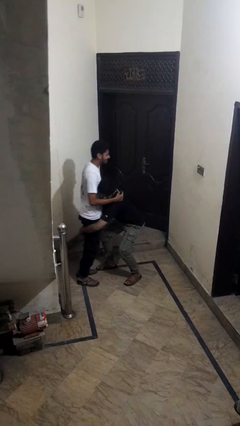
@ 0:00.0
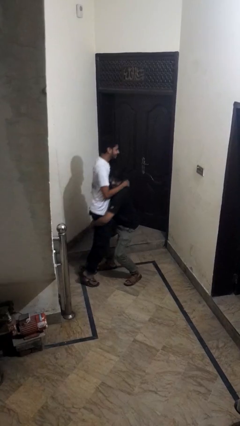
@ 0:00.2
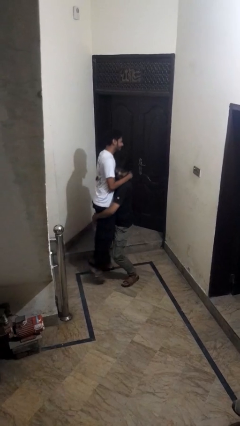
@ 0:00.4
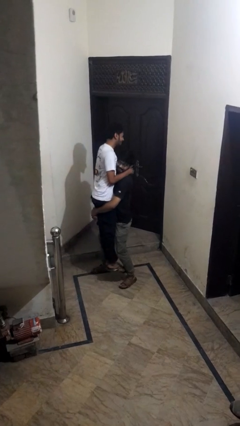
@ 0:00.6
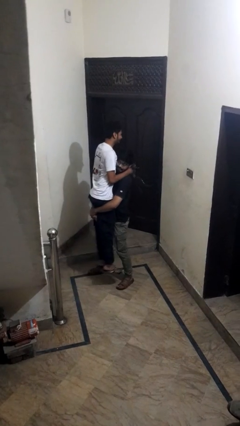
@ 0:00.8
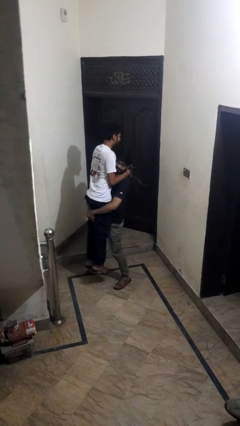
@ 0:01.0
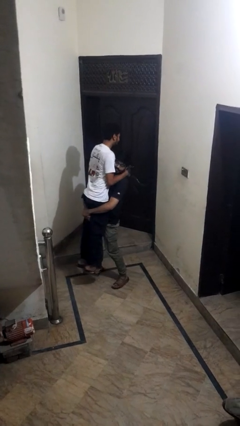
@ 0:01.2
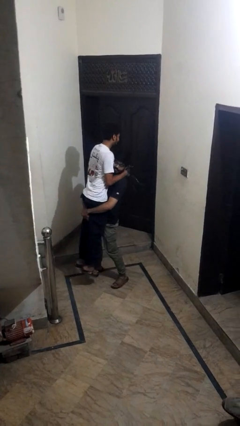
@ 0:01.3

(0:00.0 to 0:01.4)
person takes off hat

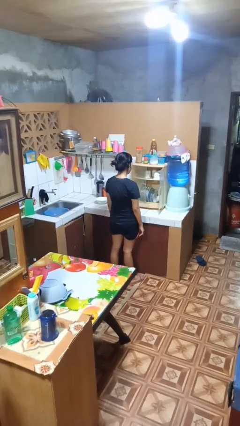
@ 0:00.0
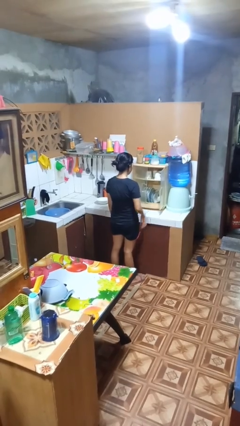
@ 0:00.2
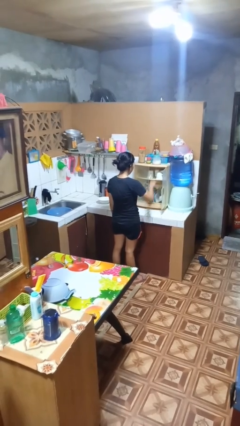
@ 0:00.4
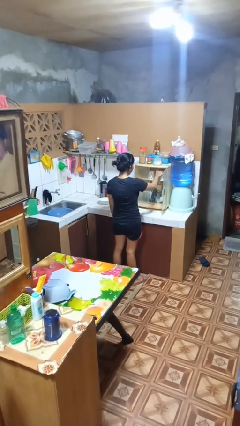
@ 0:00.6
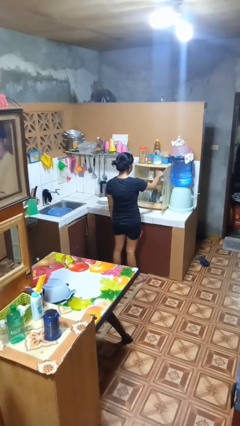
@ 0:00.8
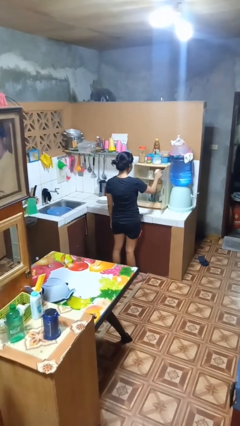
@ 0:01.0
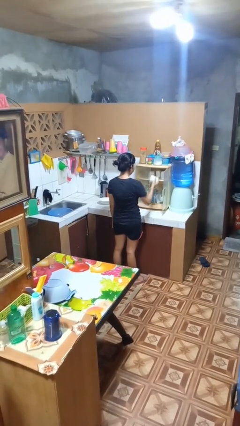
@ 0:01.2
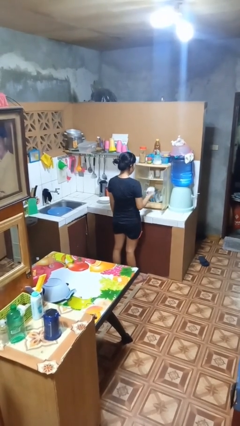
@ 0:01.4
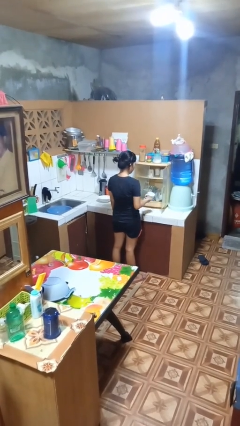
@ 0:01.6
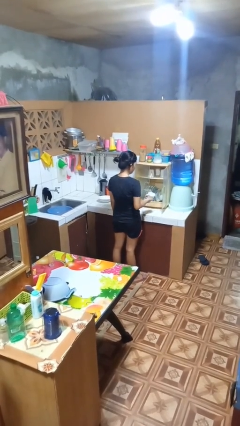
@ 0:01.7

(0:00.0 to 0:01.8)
person takes object from kitchen drawer

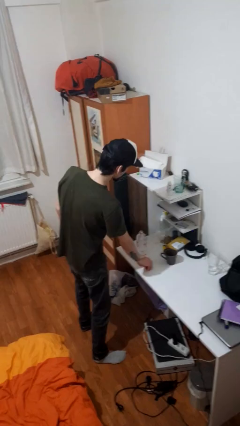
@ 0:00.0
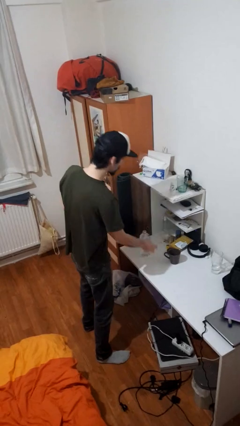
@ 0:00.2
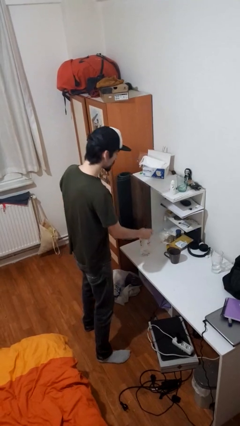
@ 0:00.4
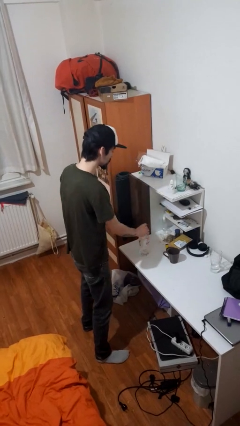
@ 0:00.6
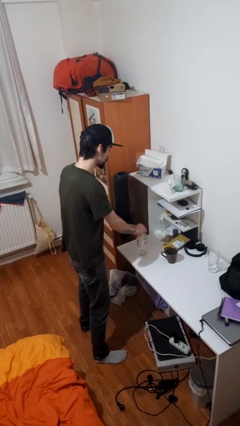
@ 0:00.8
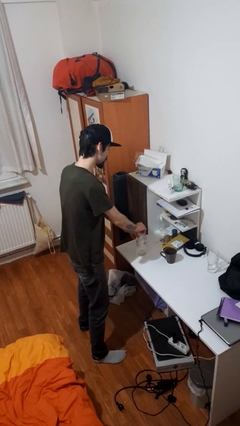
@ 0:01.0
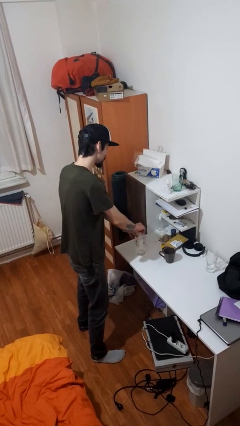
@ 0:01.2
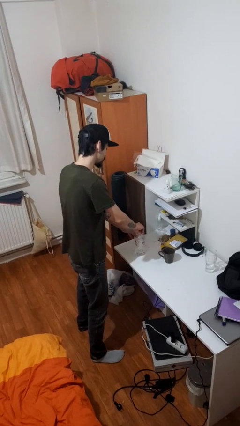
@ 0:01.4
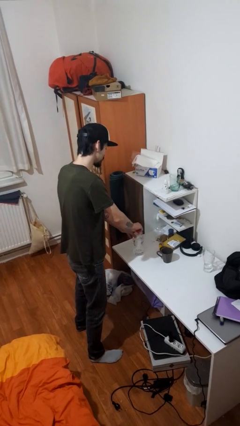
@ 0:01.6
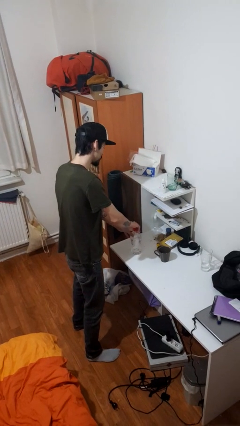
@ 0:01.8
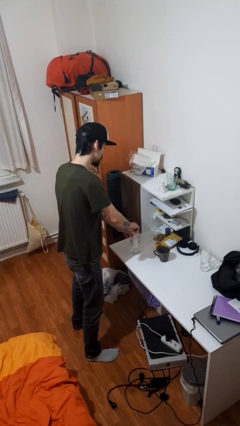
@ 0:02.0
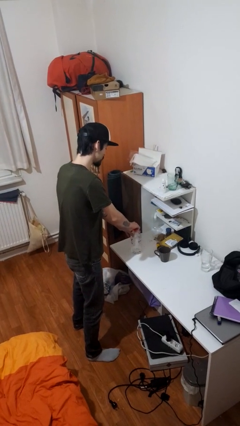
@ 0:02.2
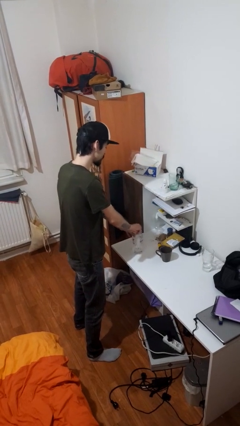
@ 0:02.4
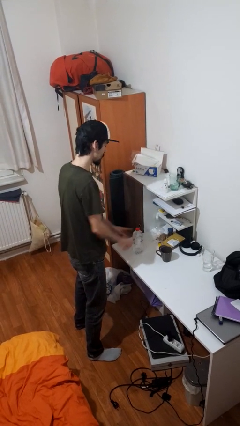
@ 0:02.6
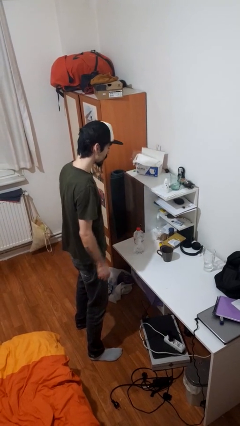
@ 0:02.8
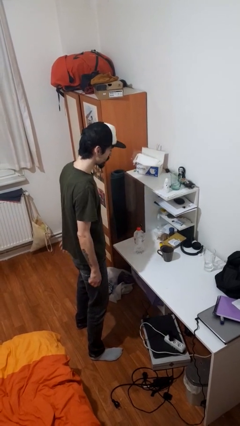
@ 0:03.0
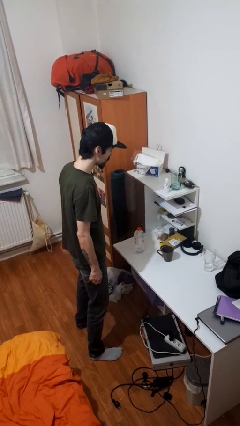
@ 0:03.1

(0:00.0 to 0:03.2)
person screws lid to bottle

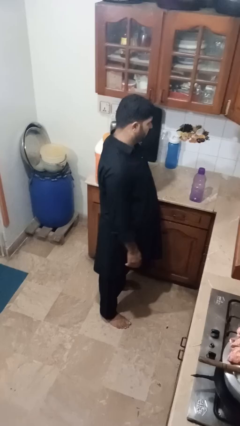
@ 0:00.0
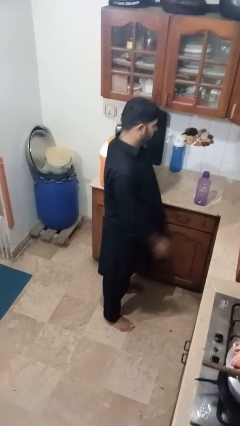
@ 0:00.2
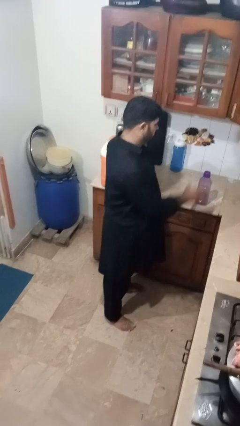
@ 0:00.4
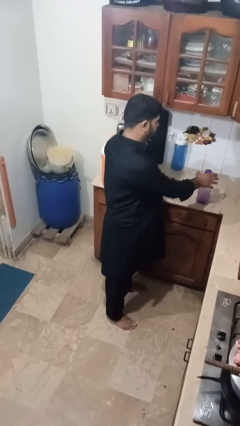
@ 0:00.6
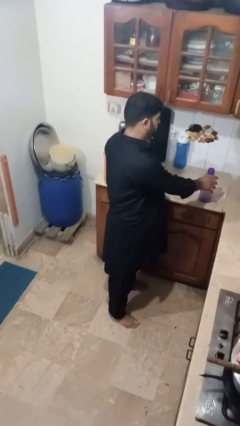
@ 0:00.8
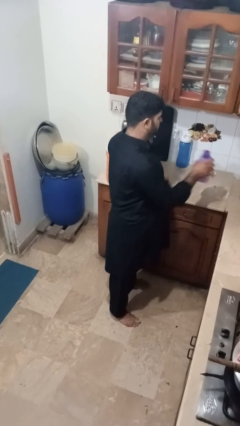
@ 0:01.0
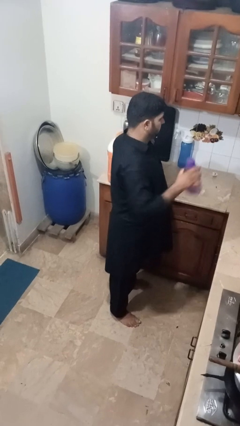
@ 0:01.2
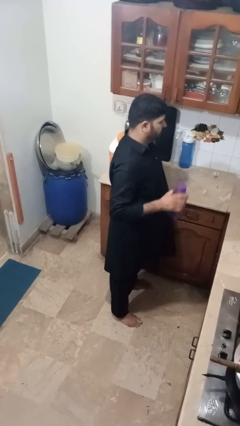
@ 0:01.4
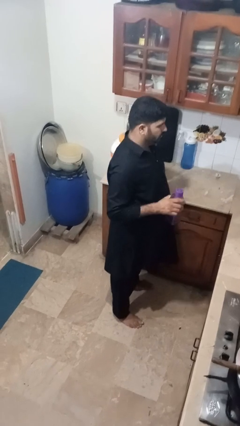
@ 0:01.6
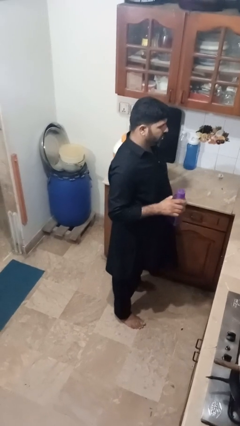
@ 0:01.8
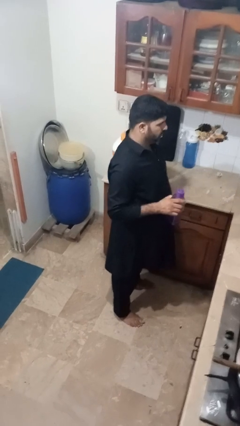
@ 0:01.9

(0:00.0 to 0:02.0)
person picks up object from countertop

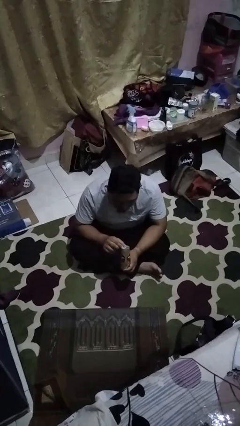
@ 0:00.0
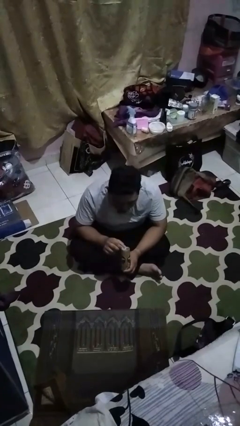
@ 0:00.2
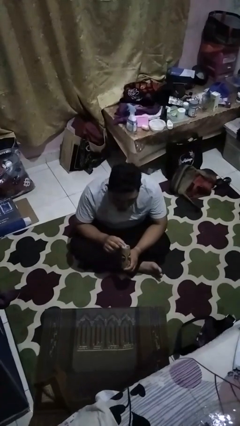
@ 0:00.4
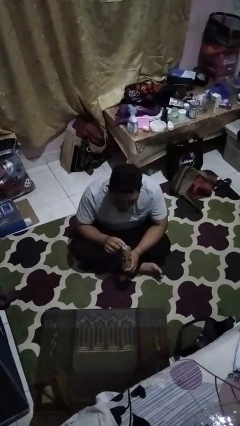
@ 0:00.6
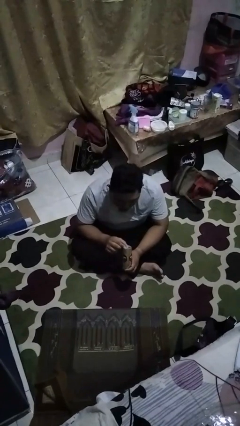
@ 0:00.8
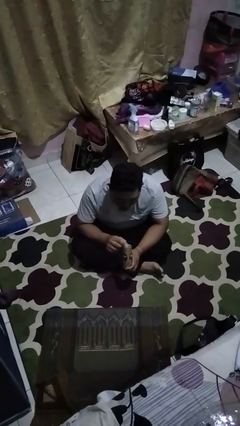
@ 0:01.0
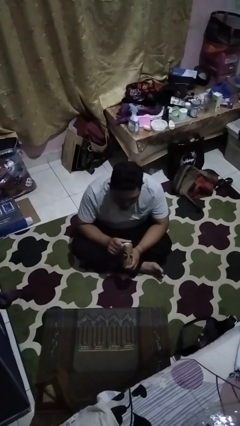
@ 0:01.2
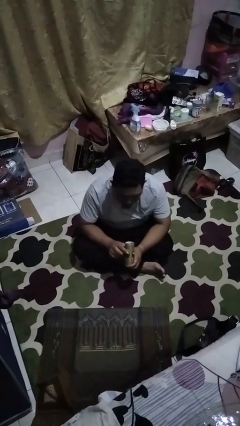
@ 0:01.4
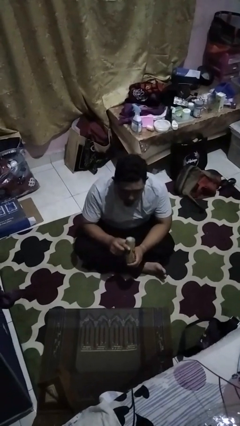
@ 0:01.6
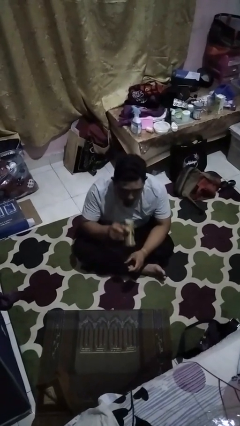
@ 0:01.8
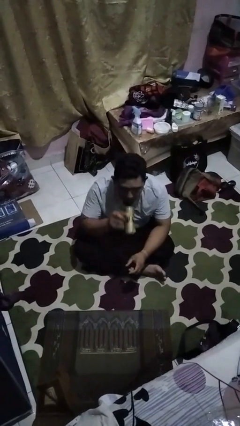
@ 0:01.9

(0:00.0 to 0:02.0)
person opens beverage can

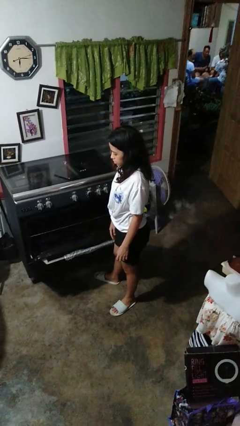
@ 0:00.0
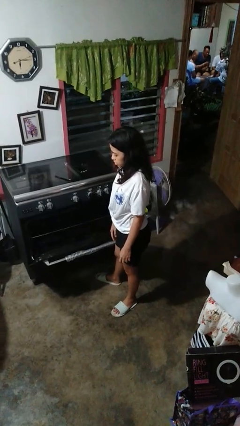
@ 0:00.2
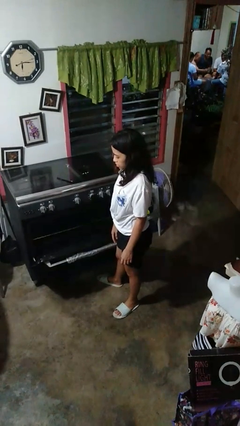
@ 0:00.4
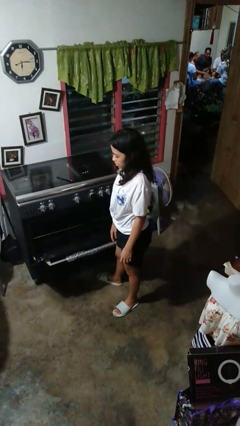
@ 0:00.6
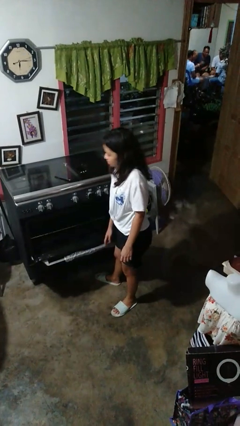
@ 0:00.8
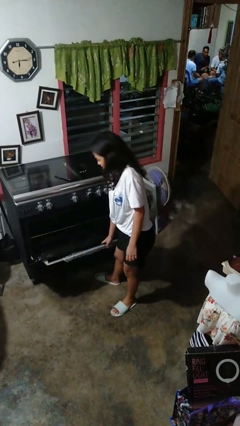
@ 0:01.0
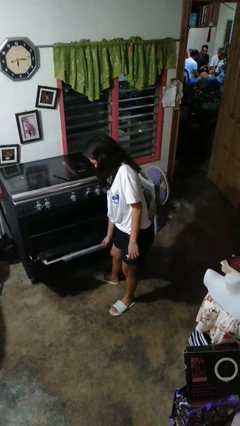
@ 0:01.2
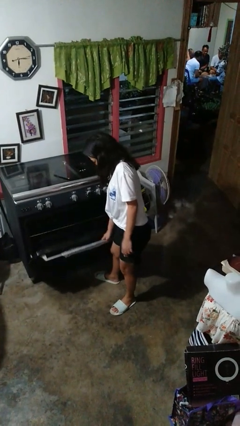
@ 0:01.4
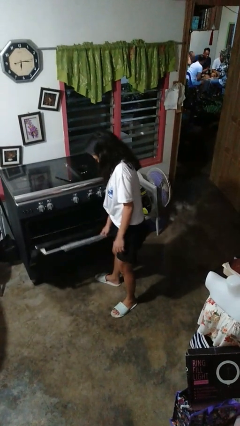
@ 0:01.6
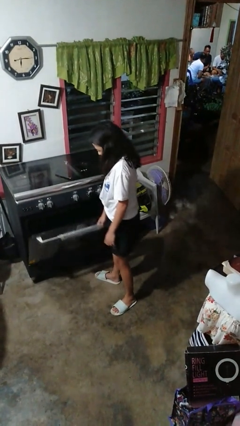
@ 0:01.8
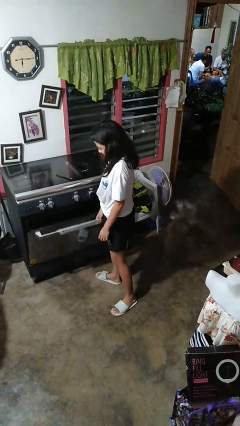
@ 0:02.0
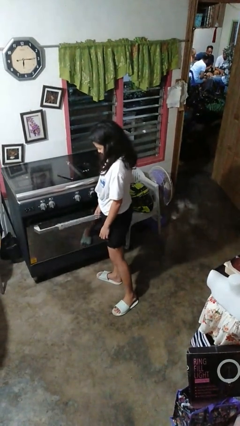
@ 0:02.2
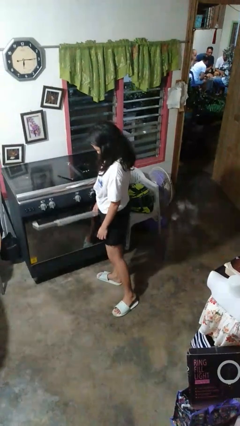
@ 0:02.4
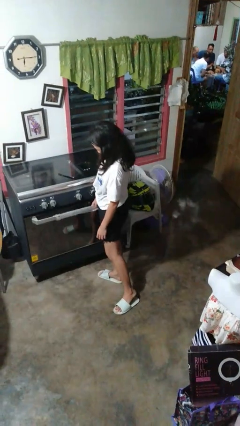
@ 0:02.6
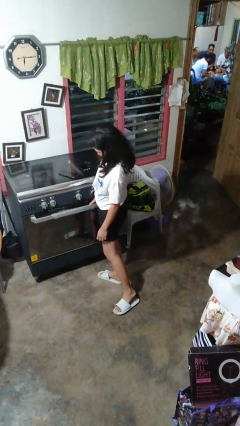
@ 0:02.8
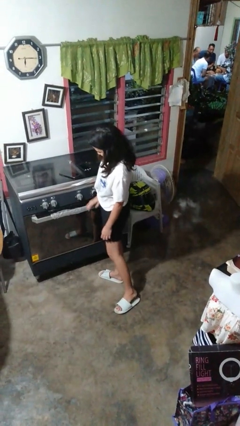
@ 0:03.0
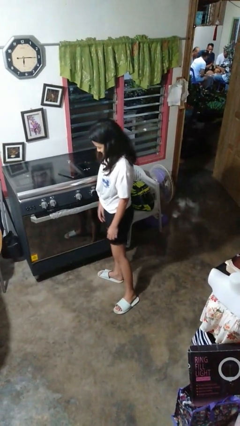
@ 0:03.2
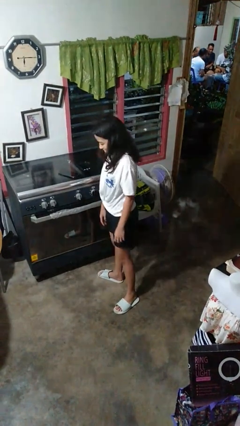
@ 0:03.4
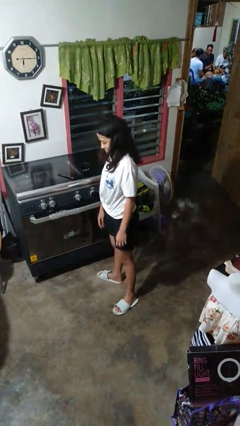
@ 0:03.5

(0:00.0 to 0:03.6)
person closes oven door

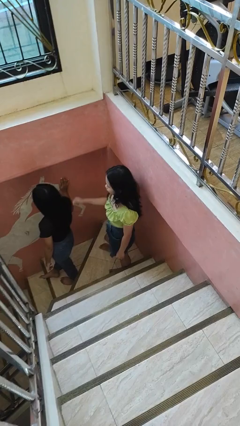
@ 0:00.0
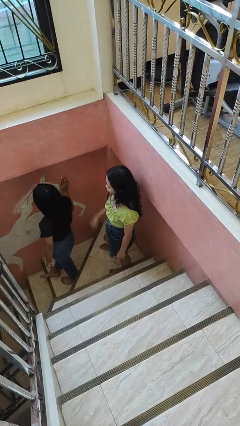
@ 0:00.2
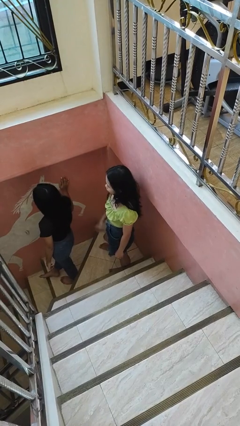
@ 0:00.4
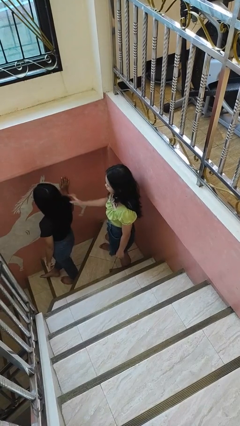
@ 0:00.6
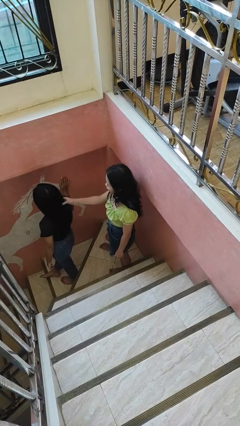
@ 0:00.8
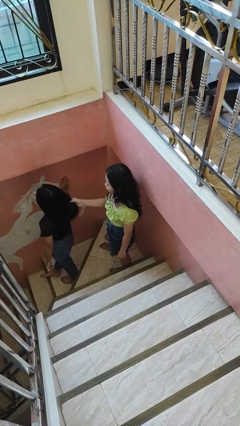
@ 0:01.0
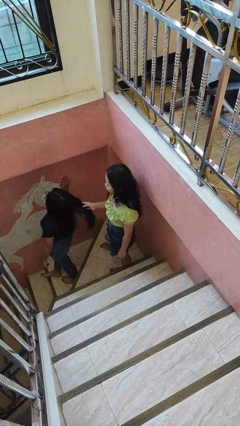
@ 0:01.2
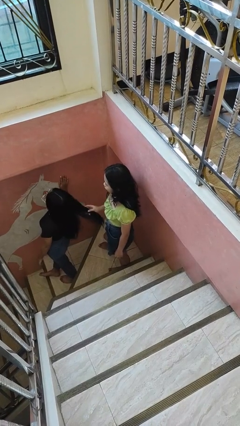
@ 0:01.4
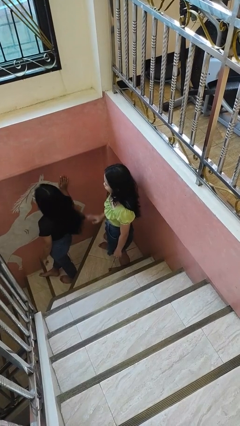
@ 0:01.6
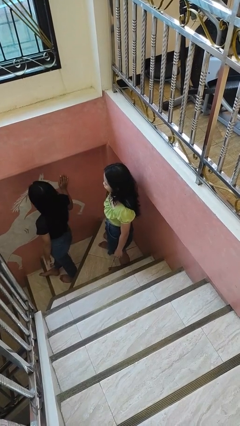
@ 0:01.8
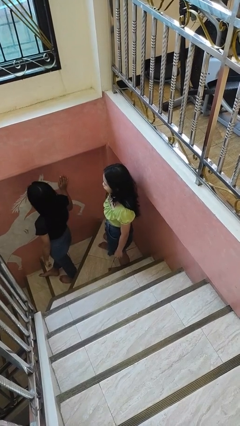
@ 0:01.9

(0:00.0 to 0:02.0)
person grabs person by hair

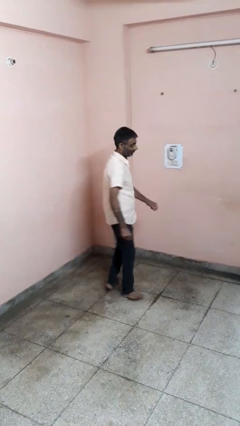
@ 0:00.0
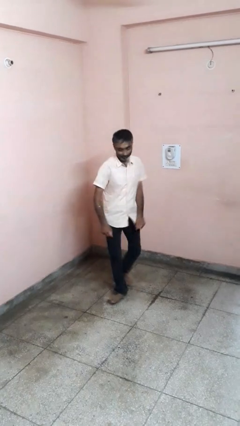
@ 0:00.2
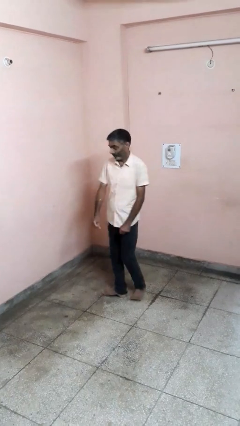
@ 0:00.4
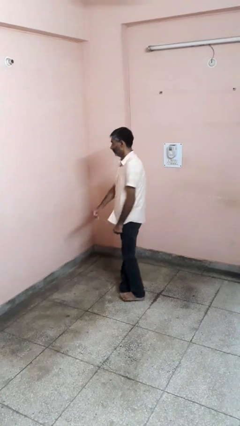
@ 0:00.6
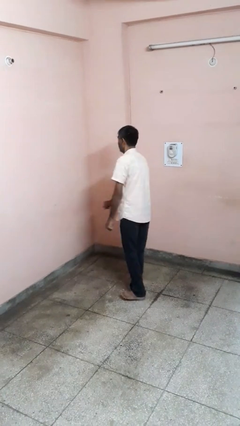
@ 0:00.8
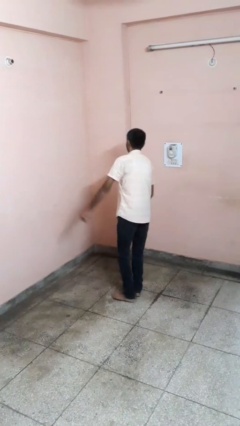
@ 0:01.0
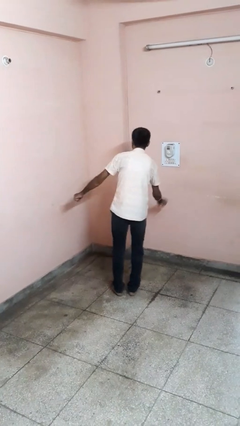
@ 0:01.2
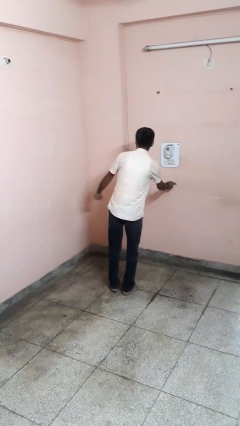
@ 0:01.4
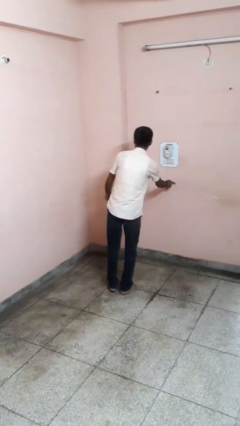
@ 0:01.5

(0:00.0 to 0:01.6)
person twirls
